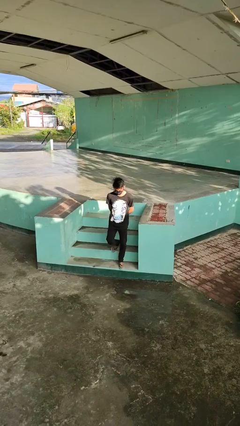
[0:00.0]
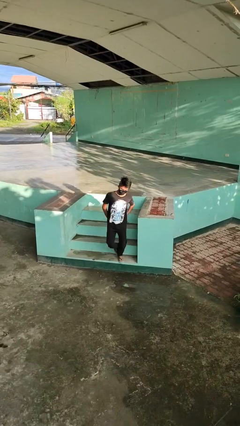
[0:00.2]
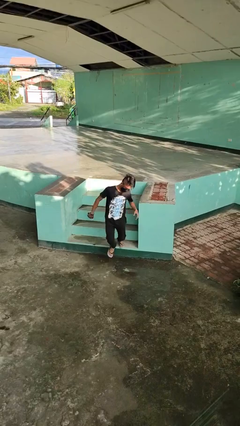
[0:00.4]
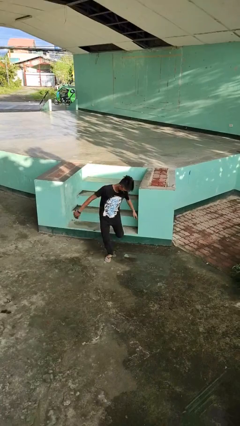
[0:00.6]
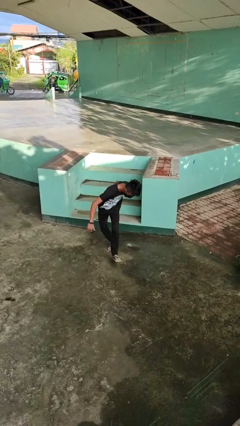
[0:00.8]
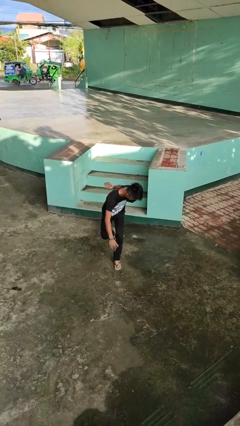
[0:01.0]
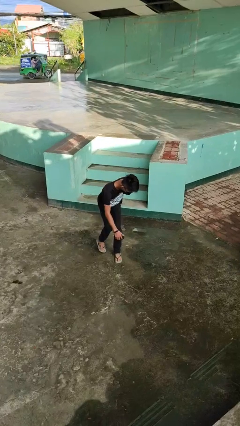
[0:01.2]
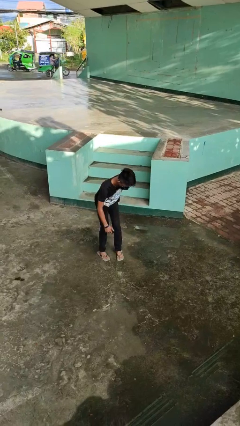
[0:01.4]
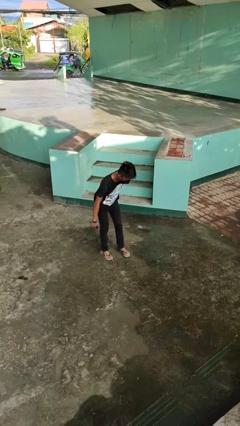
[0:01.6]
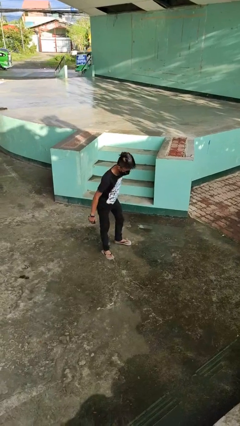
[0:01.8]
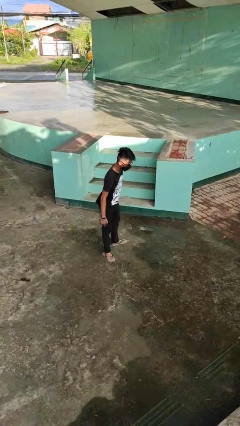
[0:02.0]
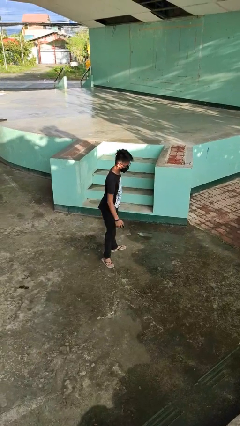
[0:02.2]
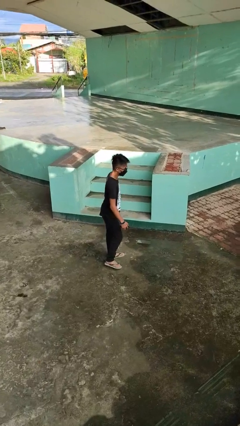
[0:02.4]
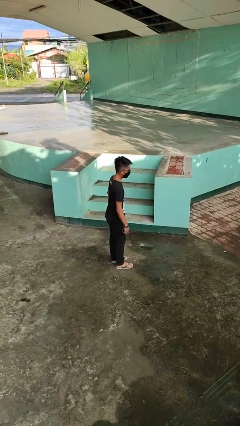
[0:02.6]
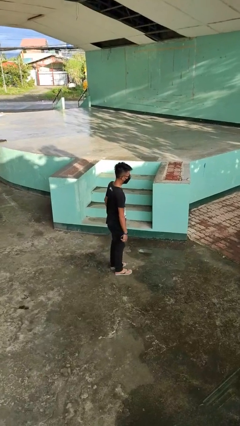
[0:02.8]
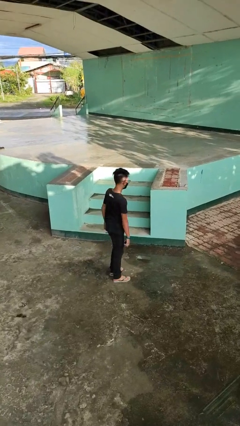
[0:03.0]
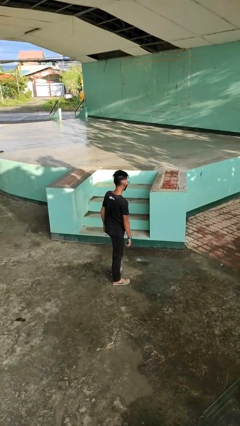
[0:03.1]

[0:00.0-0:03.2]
person trips on stair

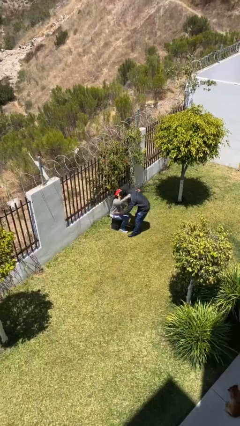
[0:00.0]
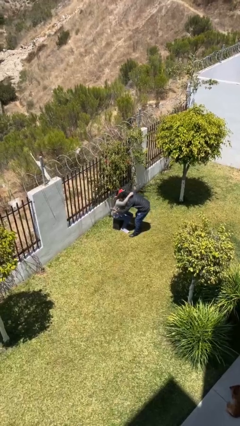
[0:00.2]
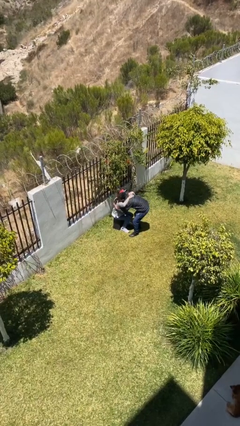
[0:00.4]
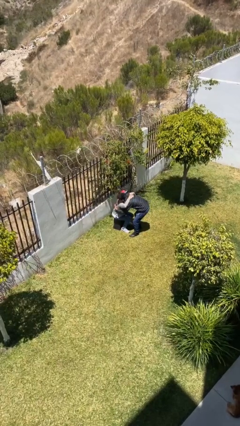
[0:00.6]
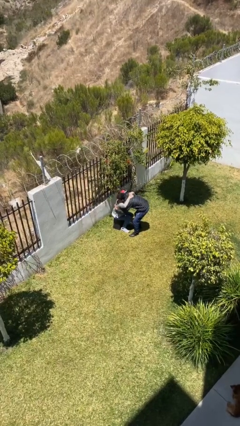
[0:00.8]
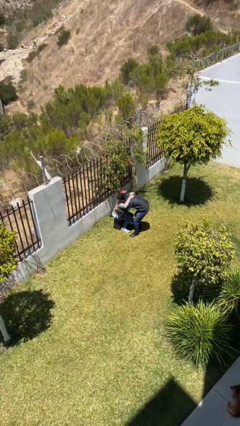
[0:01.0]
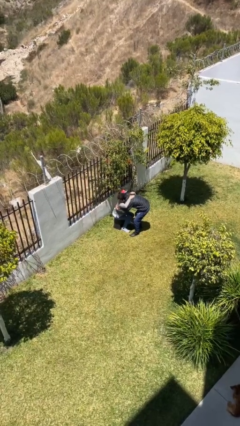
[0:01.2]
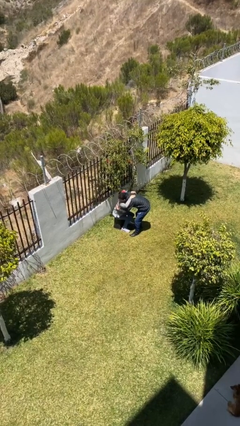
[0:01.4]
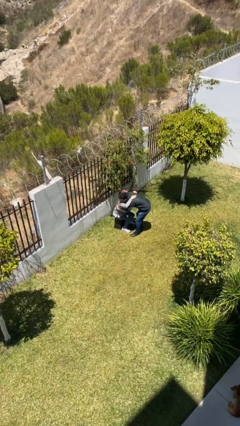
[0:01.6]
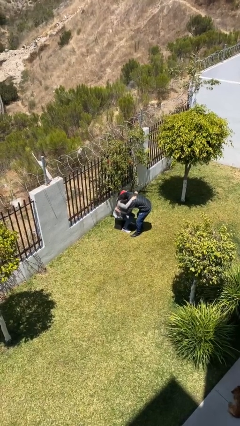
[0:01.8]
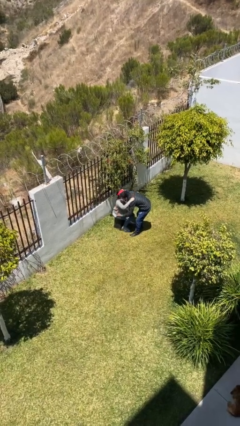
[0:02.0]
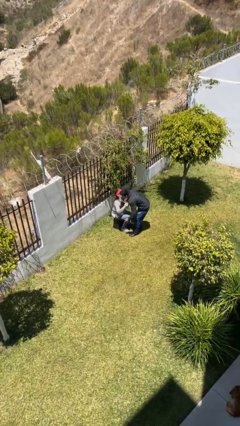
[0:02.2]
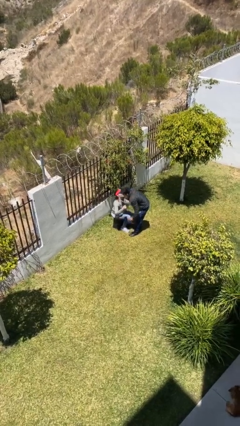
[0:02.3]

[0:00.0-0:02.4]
person embraces person

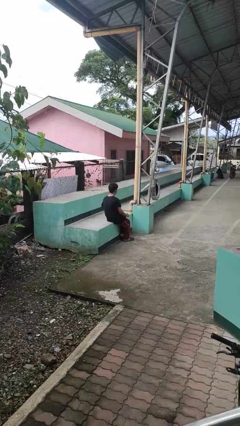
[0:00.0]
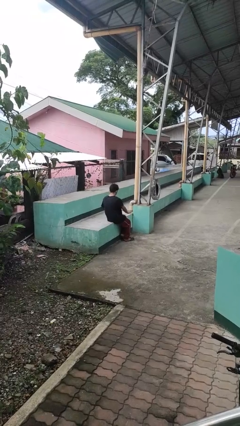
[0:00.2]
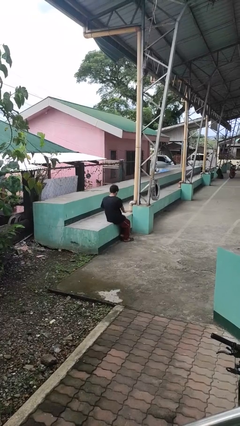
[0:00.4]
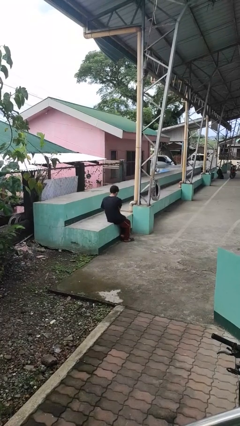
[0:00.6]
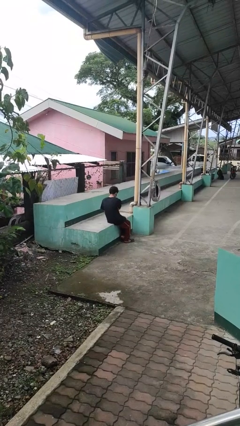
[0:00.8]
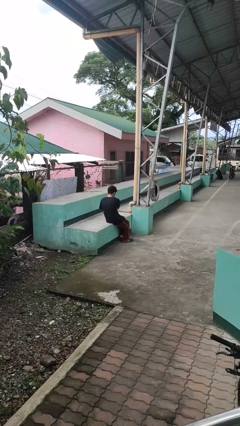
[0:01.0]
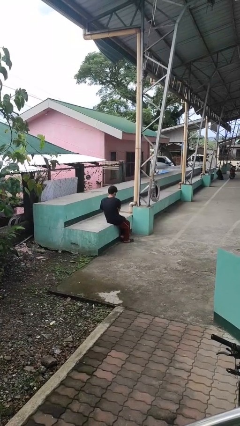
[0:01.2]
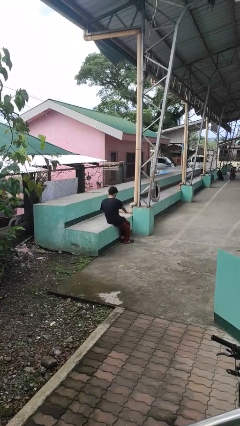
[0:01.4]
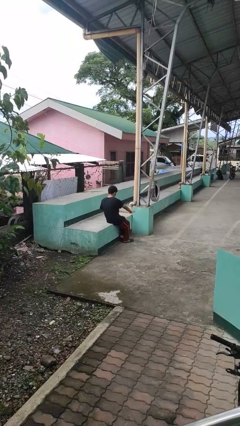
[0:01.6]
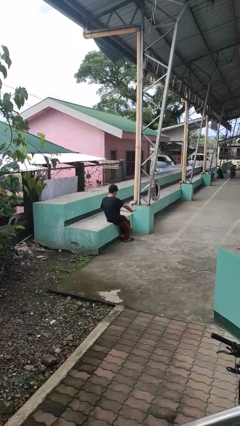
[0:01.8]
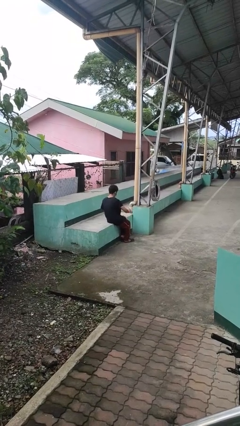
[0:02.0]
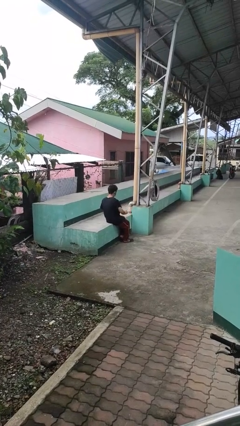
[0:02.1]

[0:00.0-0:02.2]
person waves hand over object

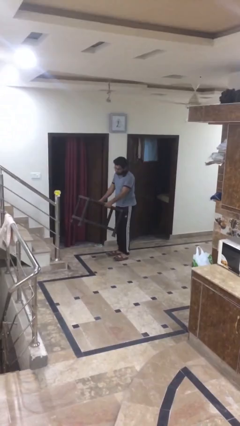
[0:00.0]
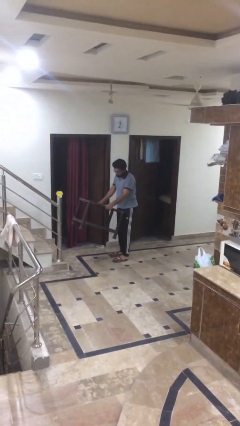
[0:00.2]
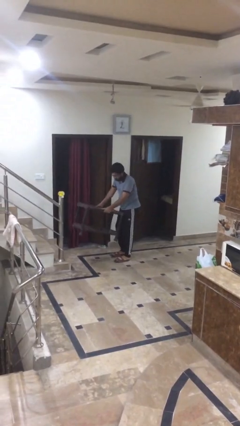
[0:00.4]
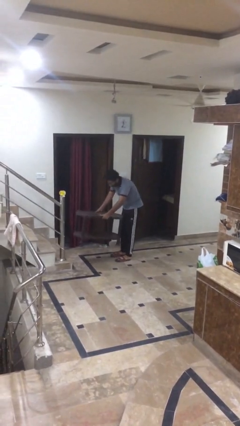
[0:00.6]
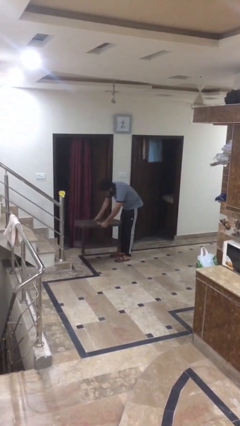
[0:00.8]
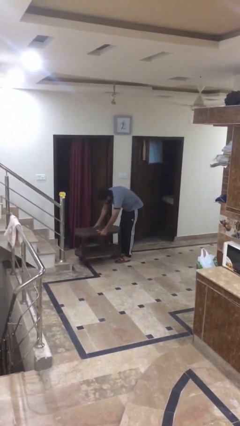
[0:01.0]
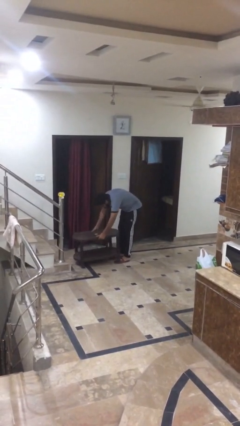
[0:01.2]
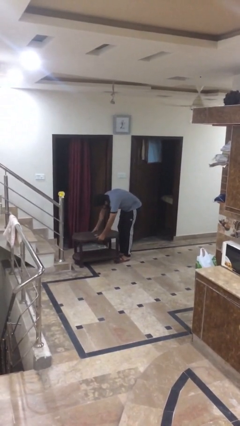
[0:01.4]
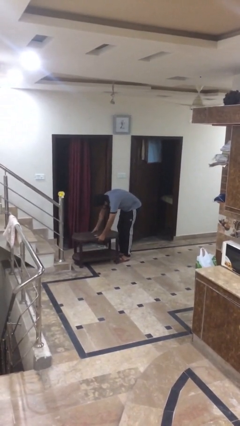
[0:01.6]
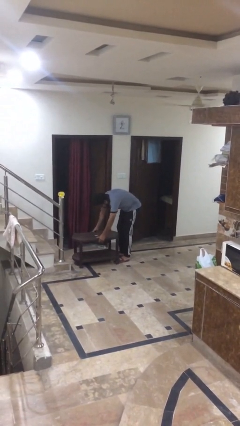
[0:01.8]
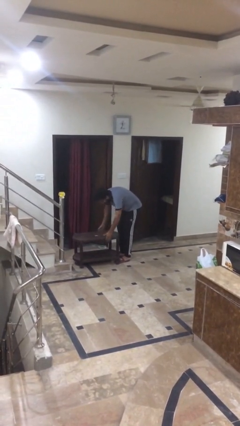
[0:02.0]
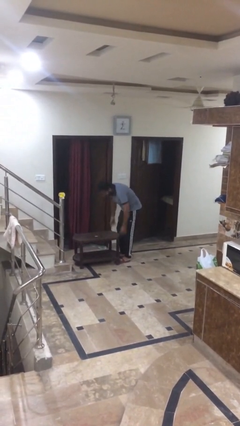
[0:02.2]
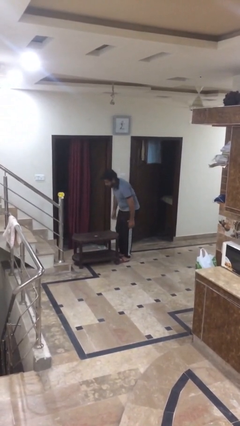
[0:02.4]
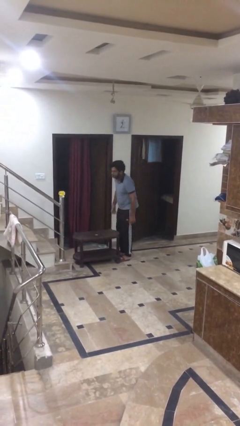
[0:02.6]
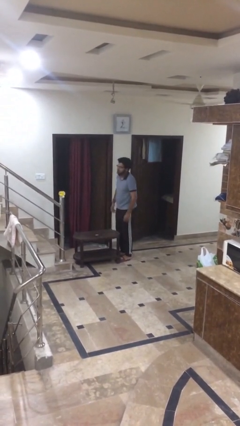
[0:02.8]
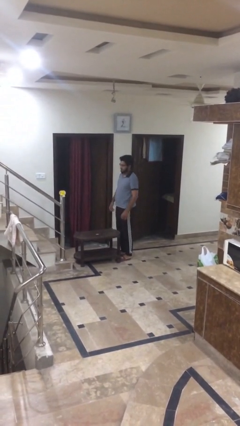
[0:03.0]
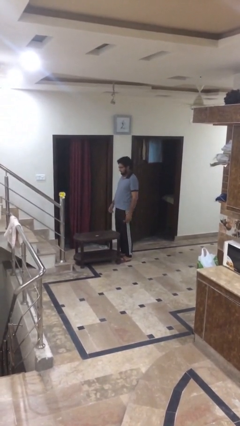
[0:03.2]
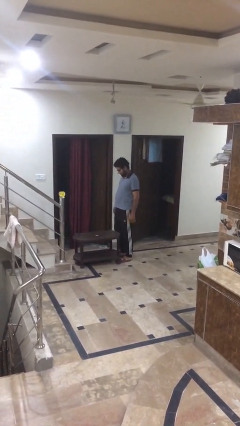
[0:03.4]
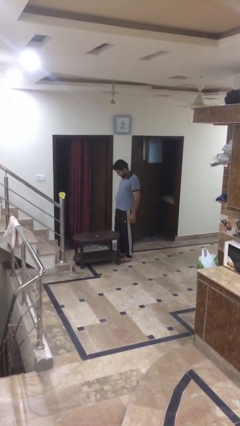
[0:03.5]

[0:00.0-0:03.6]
person puts down object on floor

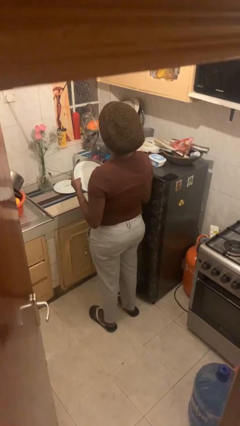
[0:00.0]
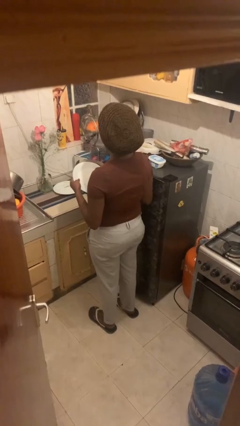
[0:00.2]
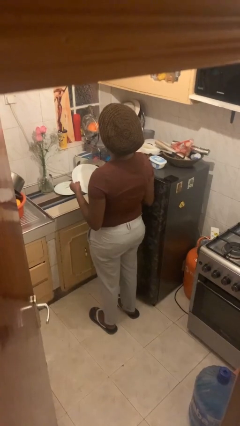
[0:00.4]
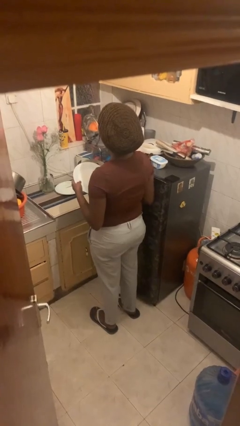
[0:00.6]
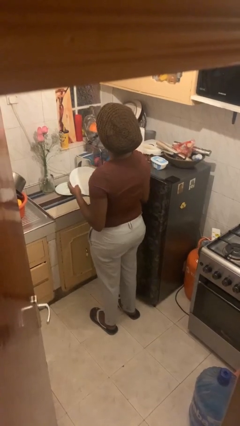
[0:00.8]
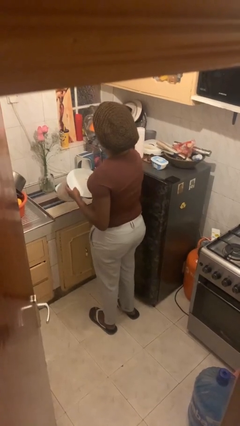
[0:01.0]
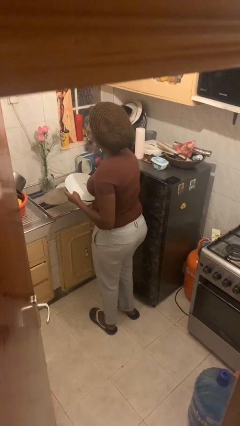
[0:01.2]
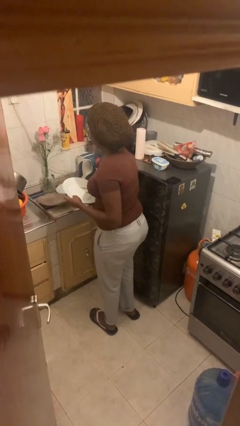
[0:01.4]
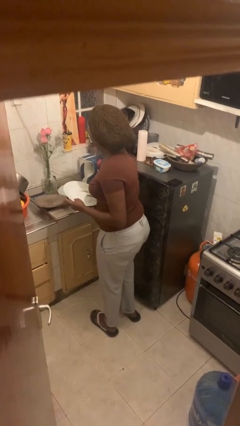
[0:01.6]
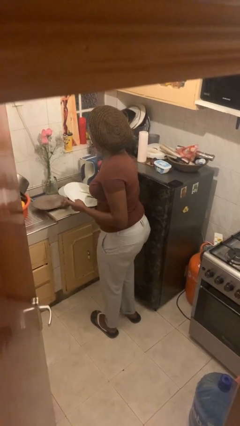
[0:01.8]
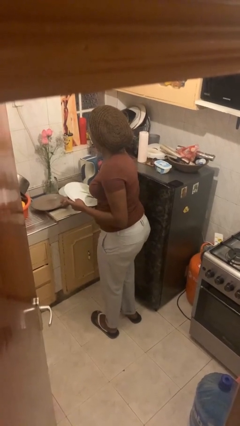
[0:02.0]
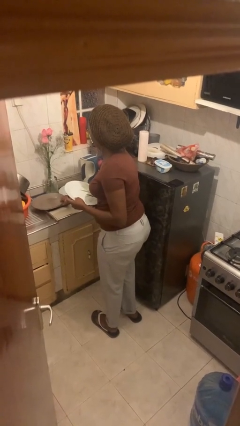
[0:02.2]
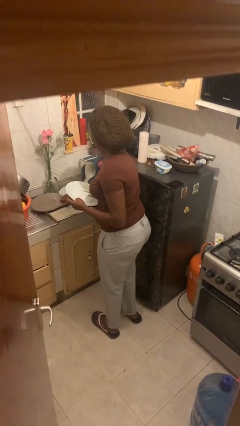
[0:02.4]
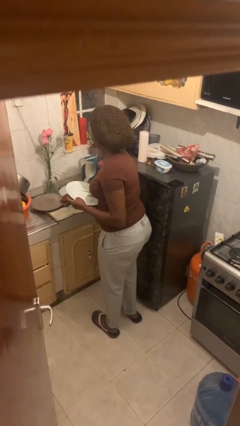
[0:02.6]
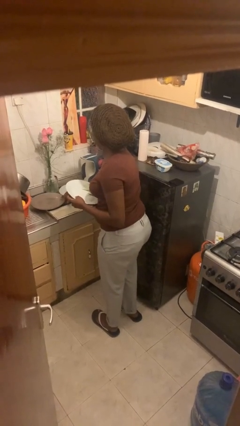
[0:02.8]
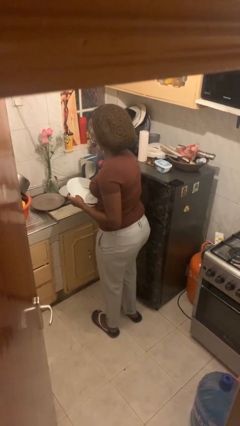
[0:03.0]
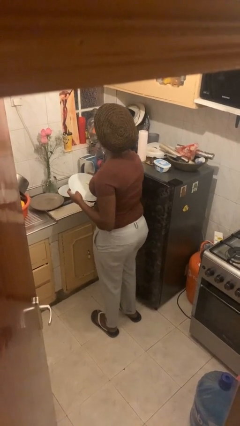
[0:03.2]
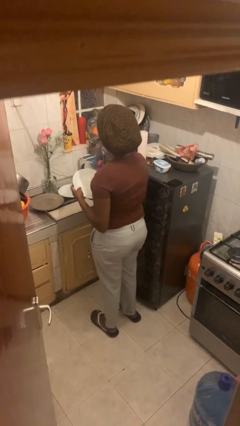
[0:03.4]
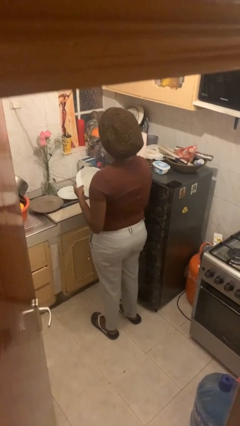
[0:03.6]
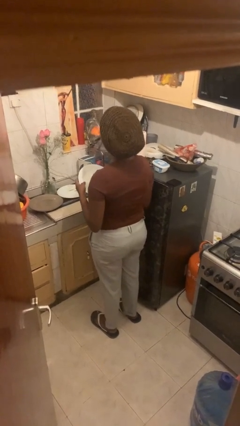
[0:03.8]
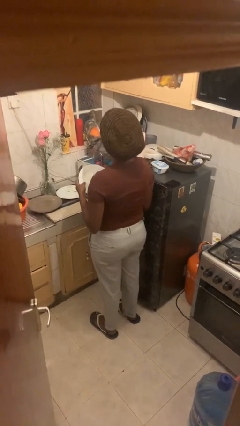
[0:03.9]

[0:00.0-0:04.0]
person sets table

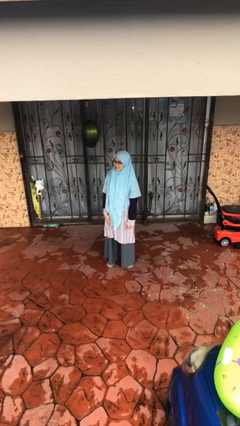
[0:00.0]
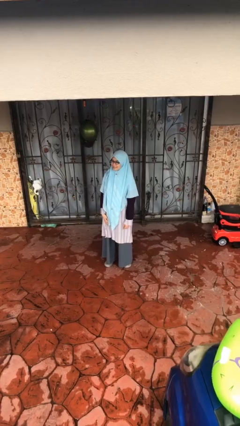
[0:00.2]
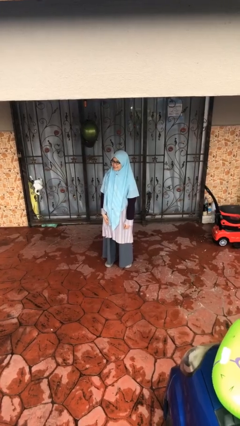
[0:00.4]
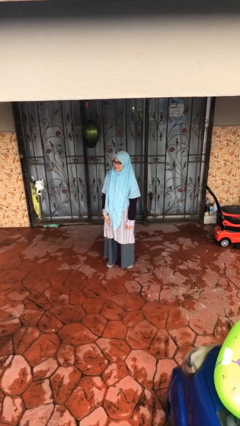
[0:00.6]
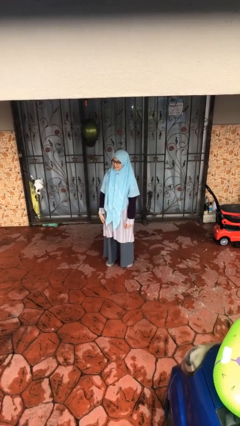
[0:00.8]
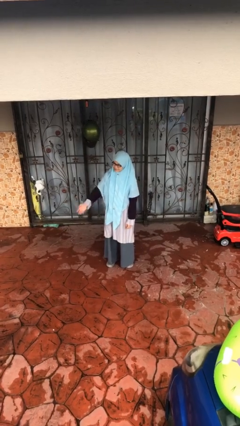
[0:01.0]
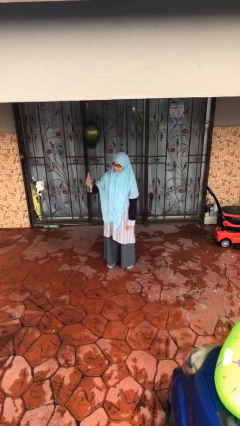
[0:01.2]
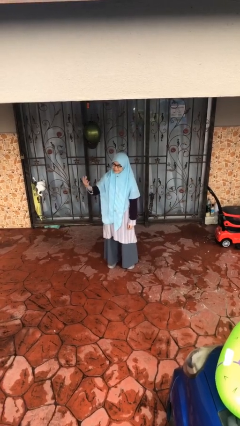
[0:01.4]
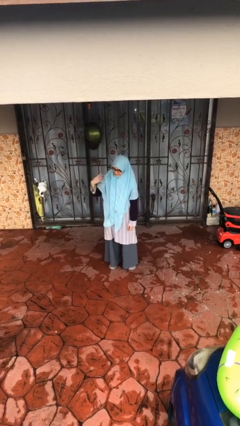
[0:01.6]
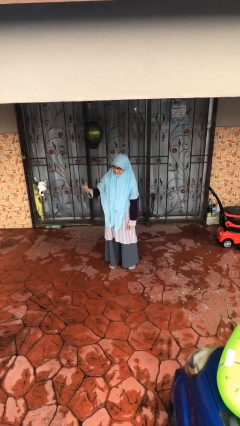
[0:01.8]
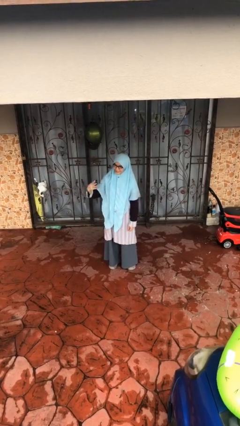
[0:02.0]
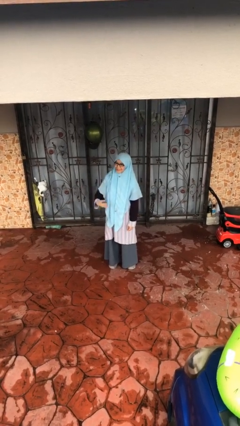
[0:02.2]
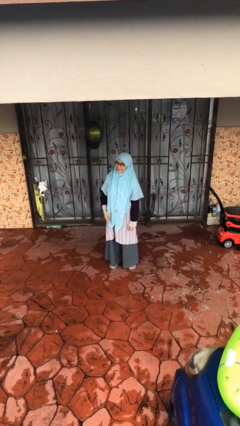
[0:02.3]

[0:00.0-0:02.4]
person gestures come here
